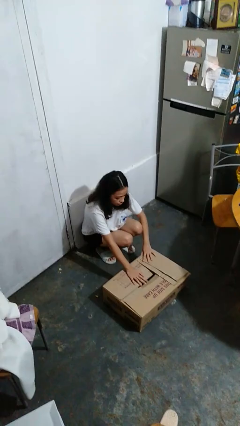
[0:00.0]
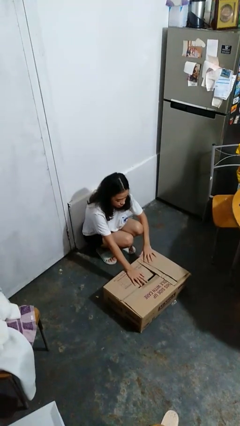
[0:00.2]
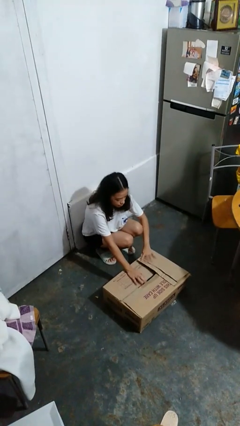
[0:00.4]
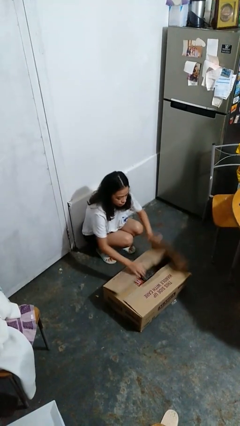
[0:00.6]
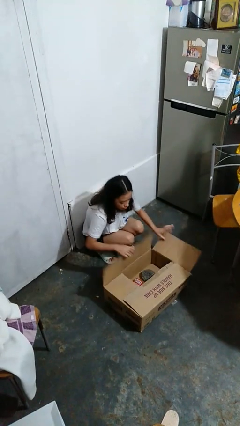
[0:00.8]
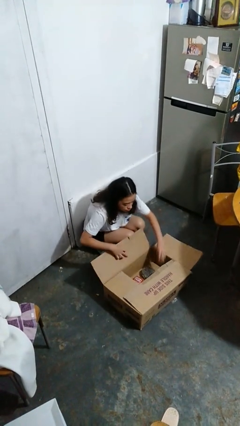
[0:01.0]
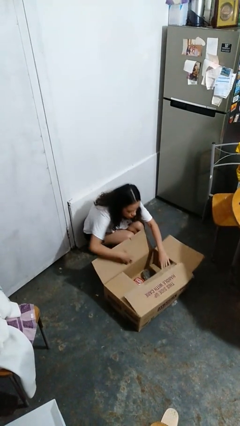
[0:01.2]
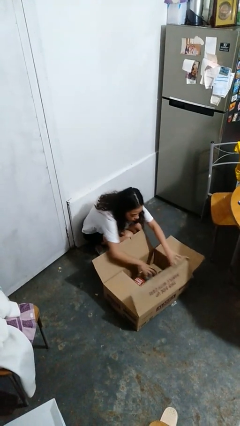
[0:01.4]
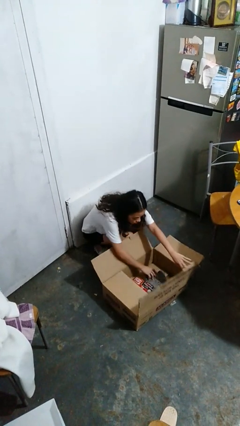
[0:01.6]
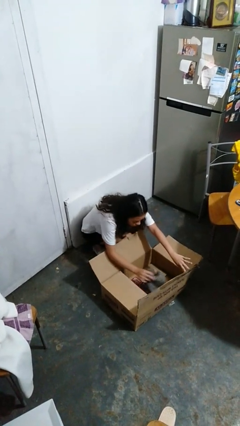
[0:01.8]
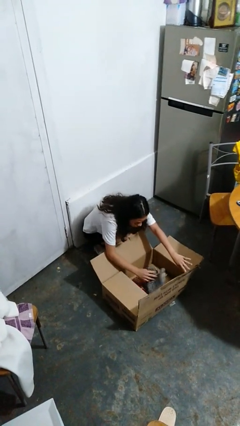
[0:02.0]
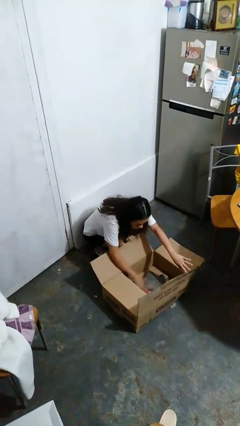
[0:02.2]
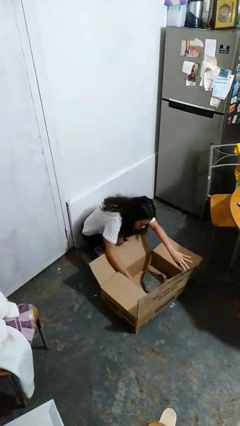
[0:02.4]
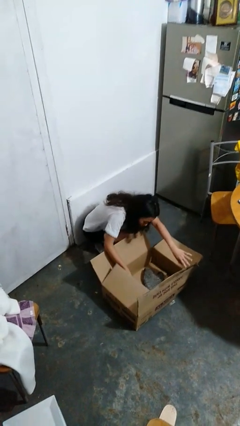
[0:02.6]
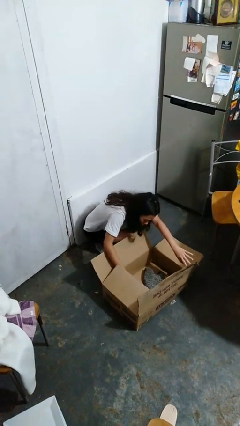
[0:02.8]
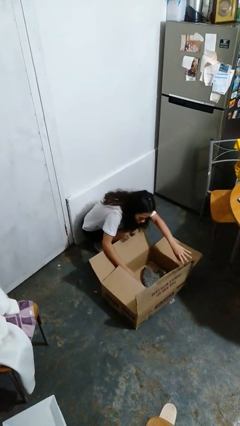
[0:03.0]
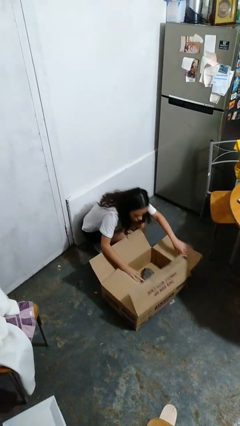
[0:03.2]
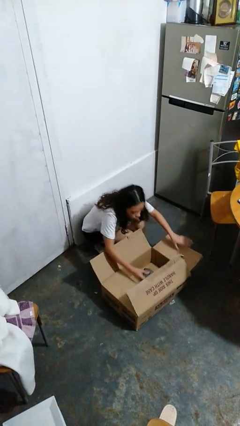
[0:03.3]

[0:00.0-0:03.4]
person searches in box

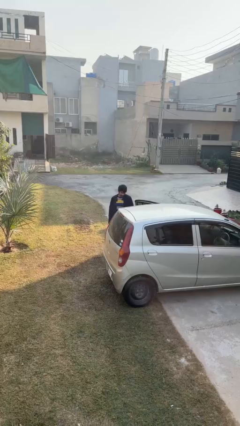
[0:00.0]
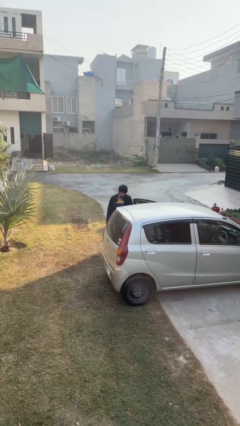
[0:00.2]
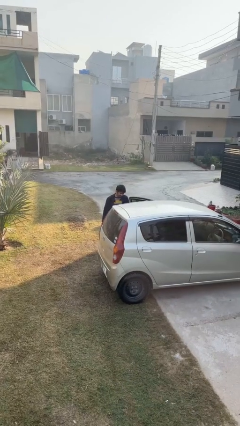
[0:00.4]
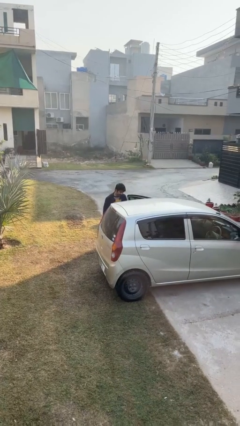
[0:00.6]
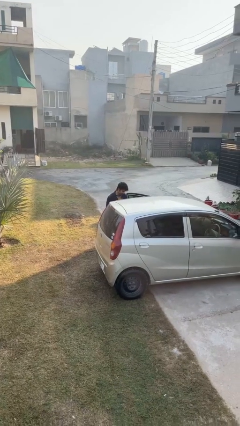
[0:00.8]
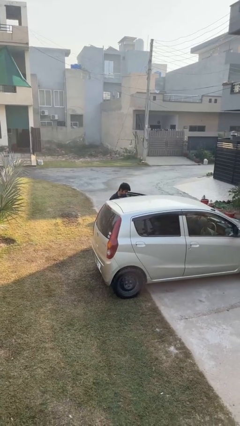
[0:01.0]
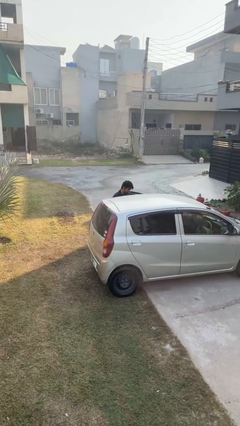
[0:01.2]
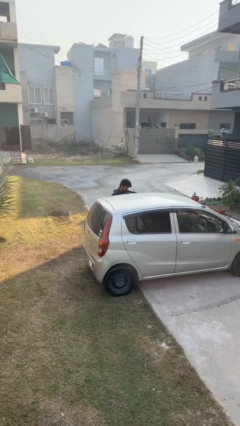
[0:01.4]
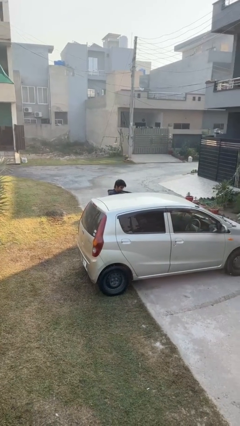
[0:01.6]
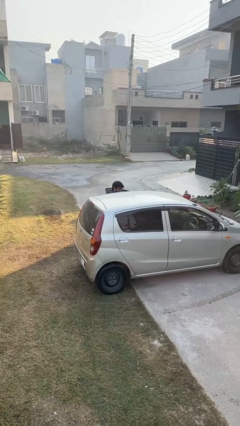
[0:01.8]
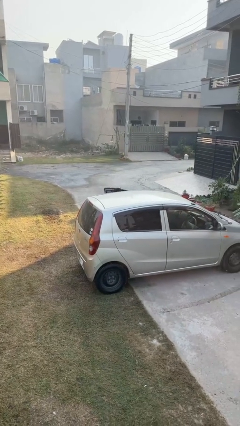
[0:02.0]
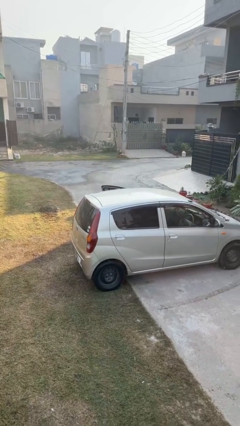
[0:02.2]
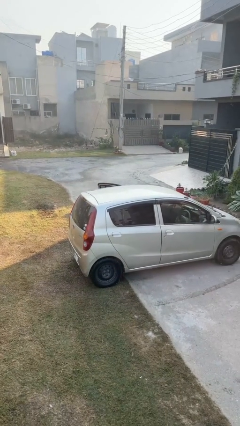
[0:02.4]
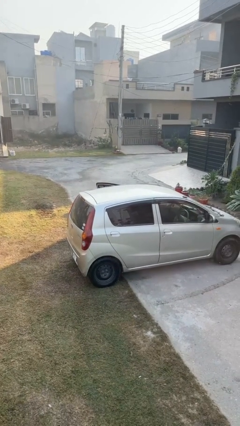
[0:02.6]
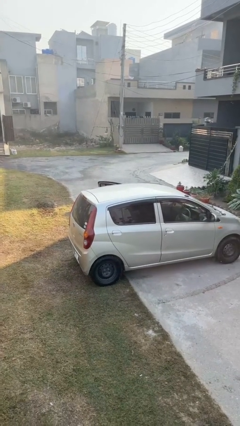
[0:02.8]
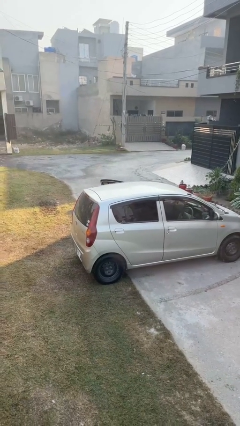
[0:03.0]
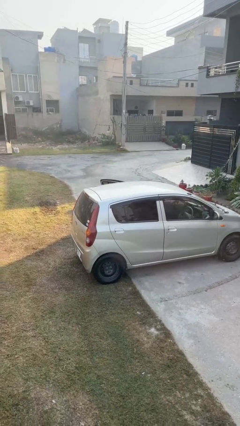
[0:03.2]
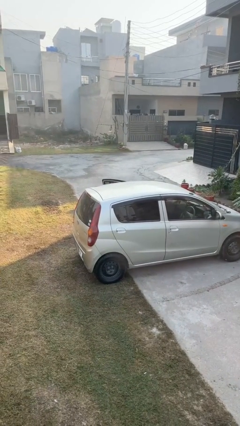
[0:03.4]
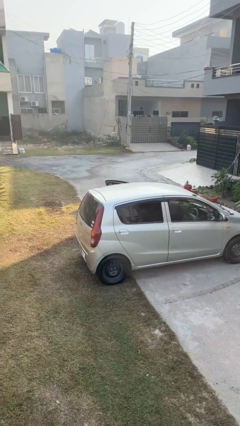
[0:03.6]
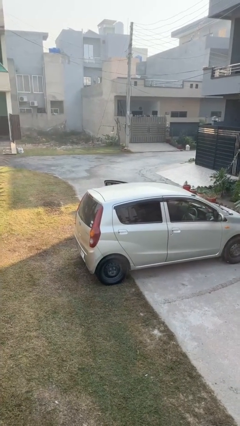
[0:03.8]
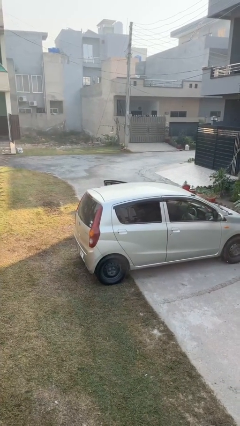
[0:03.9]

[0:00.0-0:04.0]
person enters car

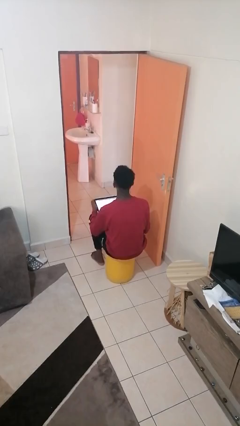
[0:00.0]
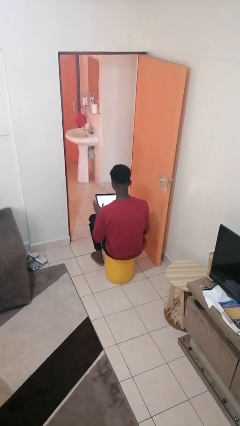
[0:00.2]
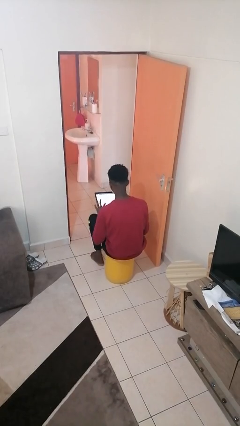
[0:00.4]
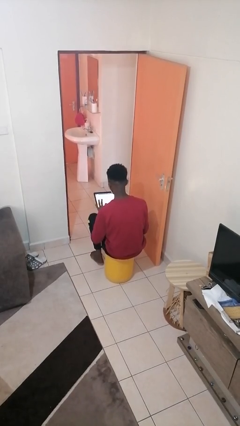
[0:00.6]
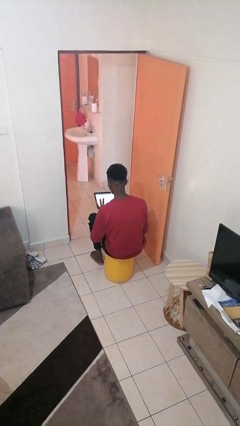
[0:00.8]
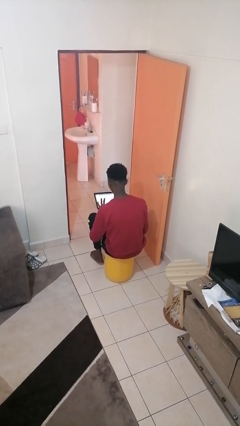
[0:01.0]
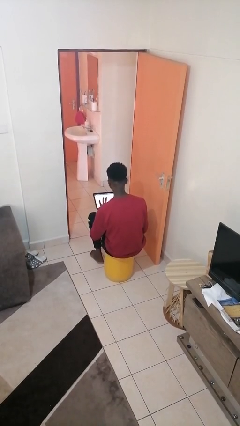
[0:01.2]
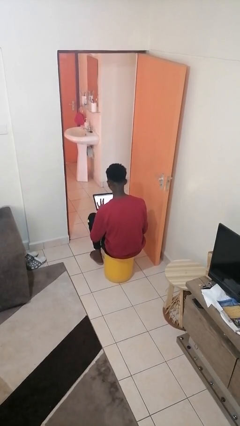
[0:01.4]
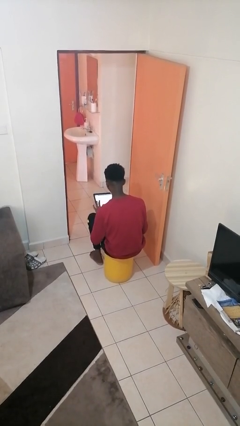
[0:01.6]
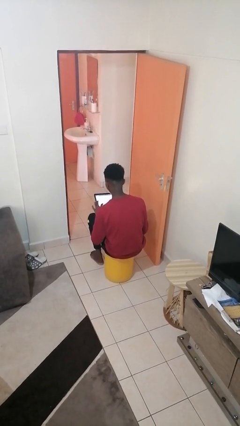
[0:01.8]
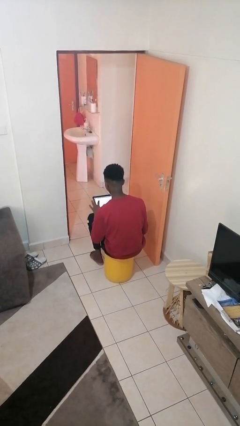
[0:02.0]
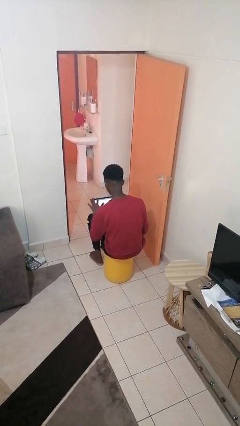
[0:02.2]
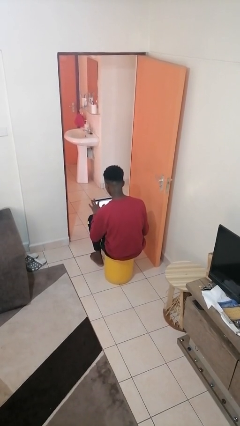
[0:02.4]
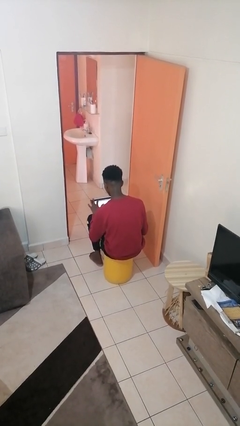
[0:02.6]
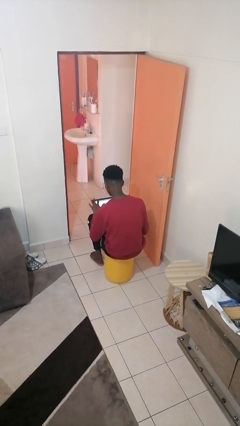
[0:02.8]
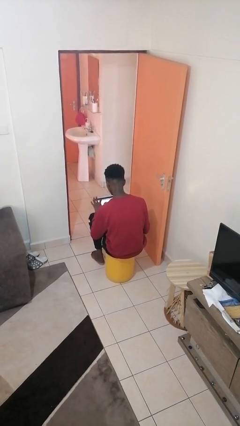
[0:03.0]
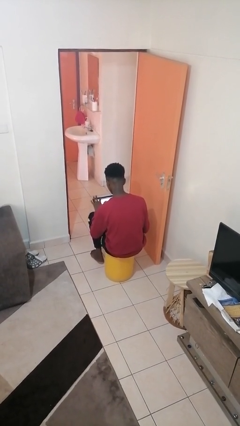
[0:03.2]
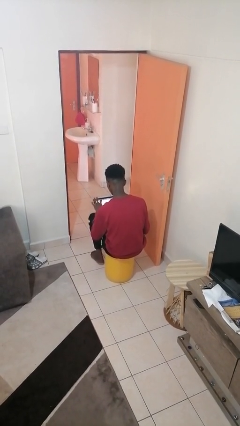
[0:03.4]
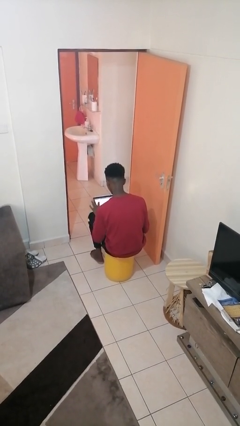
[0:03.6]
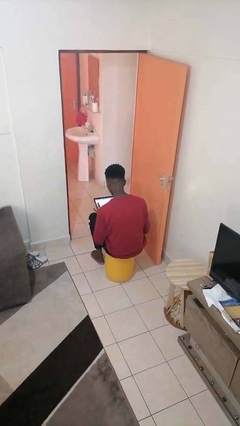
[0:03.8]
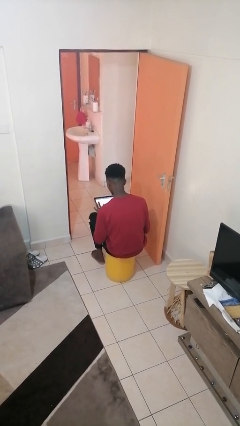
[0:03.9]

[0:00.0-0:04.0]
person interacts with tablet

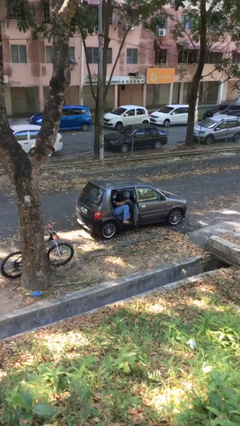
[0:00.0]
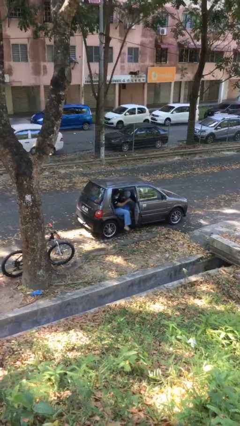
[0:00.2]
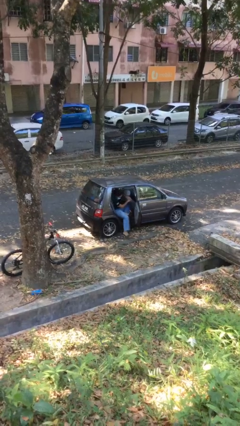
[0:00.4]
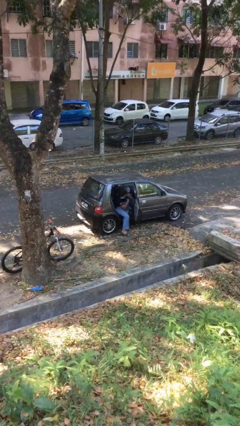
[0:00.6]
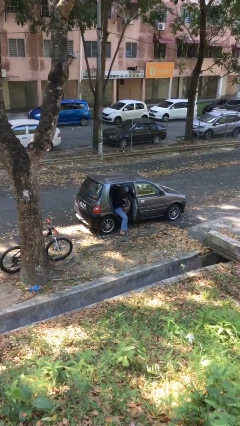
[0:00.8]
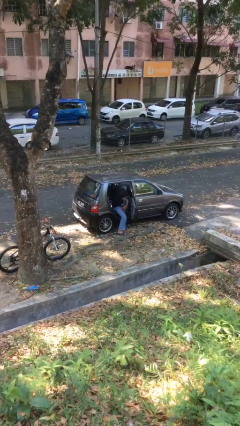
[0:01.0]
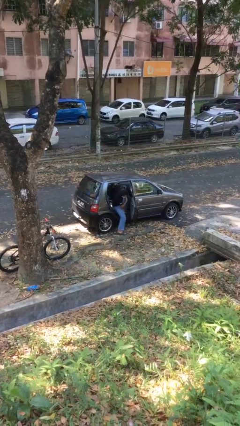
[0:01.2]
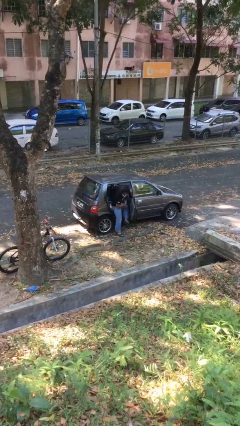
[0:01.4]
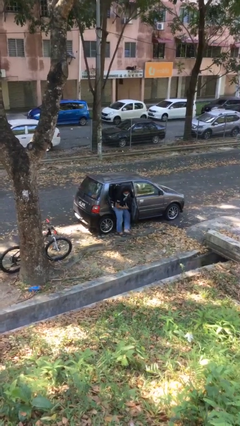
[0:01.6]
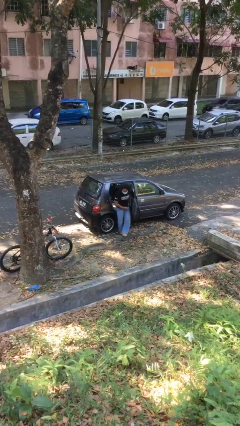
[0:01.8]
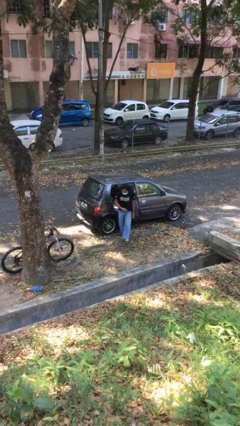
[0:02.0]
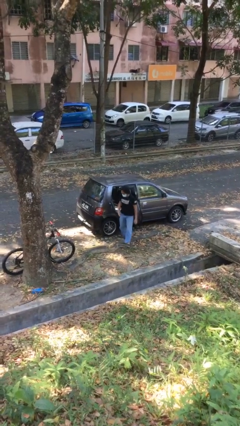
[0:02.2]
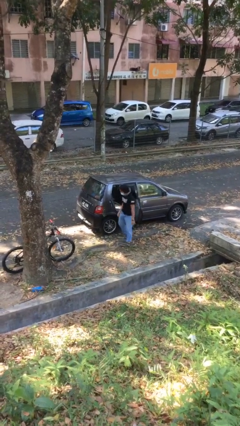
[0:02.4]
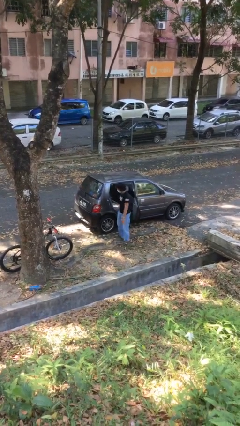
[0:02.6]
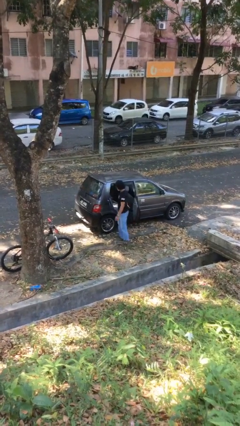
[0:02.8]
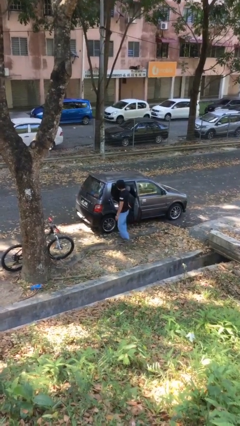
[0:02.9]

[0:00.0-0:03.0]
person exits car

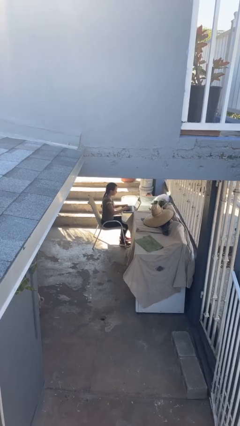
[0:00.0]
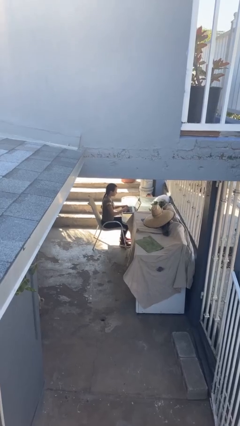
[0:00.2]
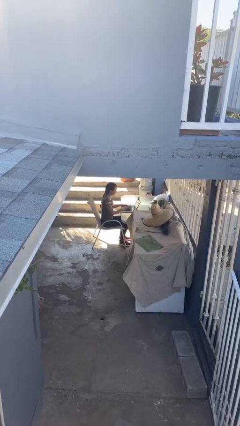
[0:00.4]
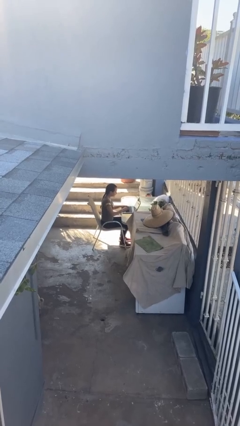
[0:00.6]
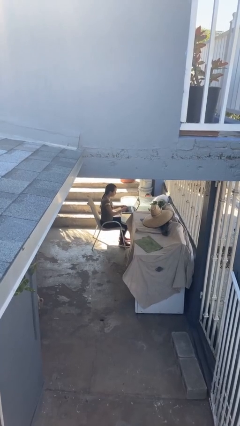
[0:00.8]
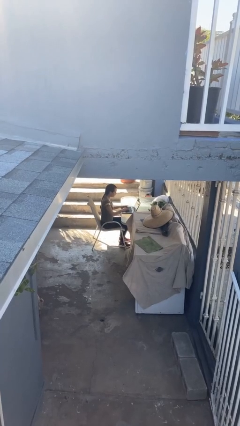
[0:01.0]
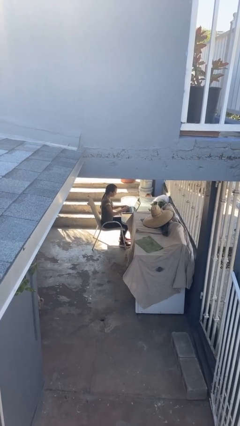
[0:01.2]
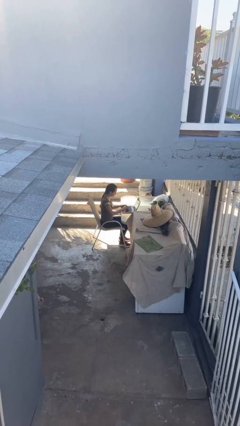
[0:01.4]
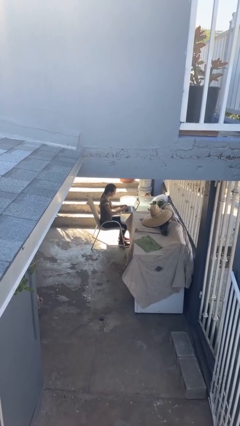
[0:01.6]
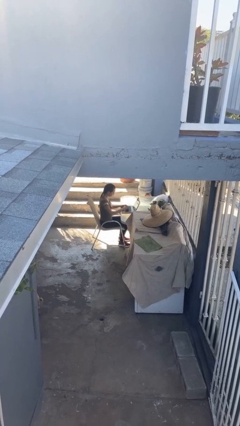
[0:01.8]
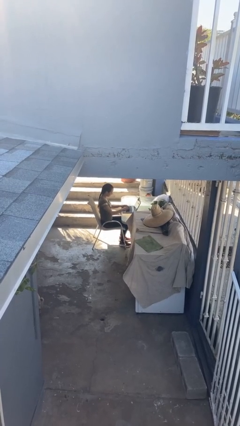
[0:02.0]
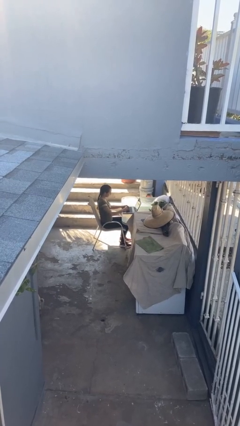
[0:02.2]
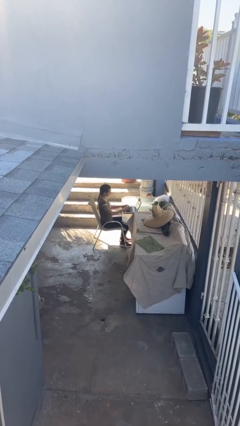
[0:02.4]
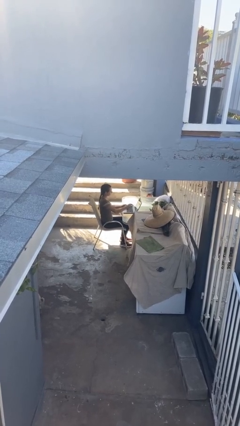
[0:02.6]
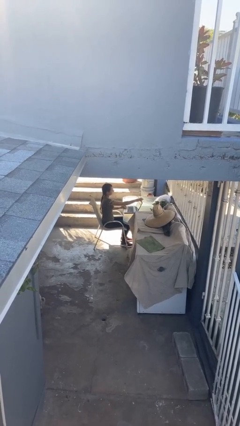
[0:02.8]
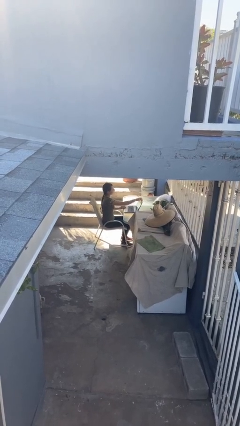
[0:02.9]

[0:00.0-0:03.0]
person interacts with laptop

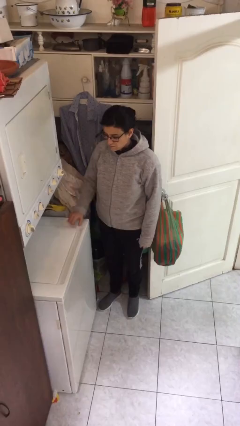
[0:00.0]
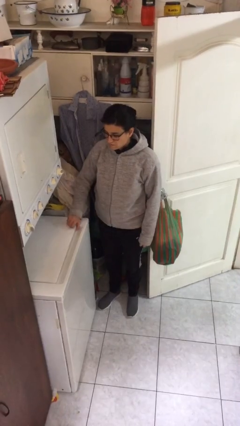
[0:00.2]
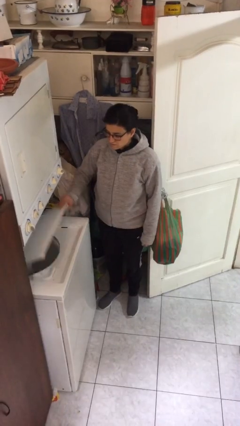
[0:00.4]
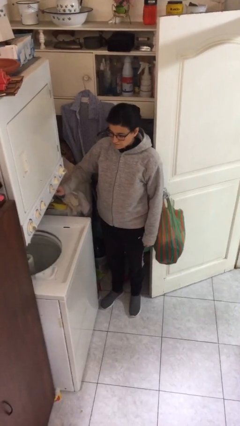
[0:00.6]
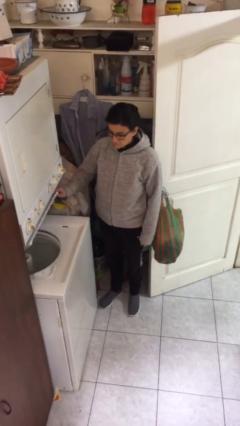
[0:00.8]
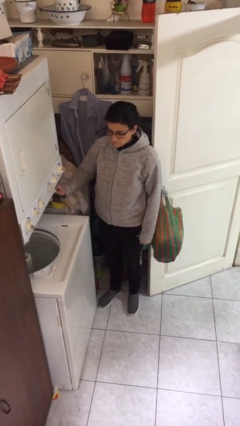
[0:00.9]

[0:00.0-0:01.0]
person opens clothes washer
